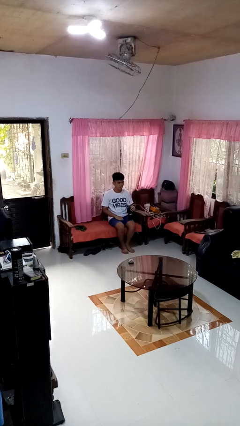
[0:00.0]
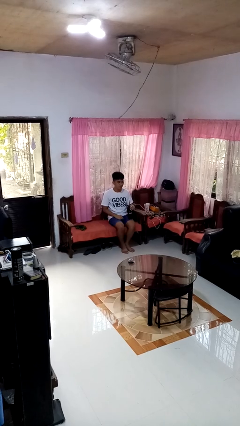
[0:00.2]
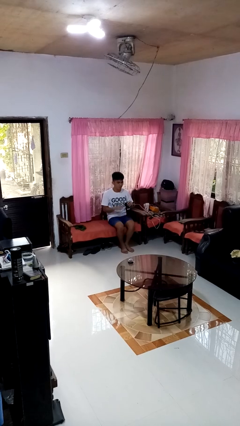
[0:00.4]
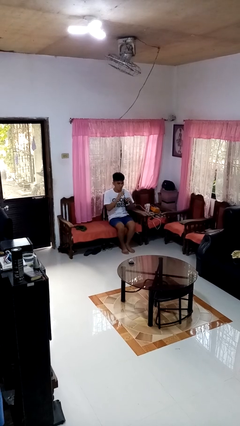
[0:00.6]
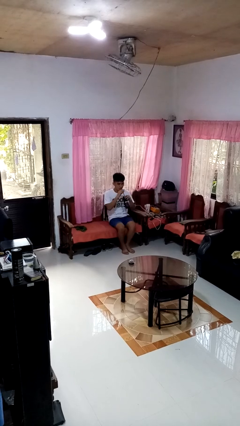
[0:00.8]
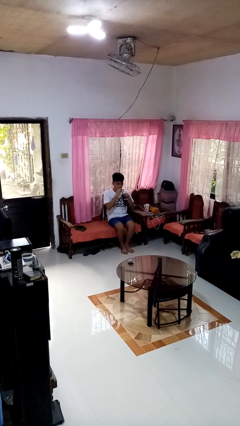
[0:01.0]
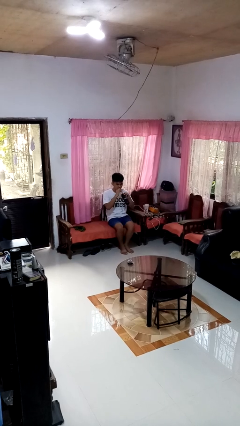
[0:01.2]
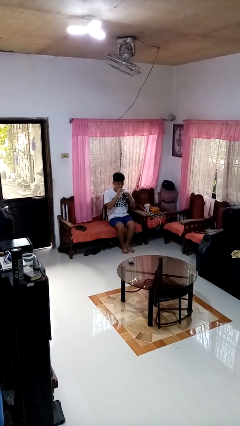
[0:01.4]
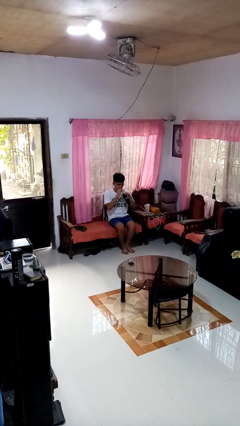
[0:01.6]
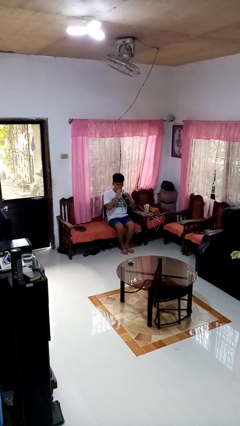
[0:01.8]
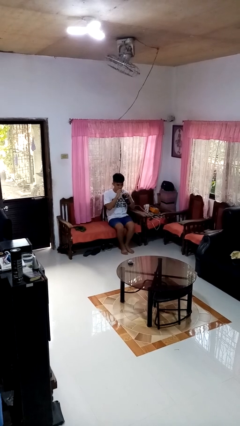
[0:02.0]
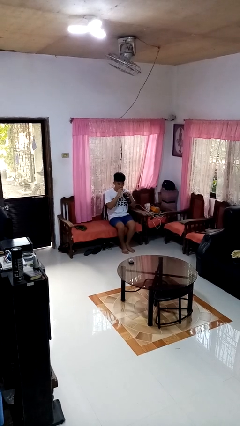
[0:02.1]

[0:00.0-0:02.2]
person drinks from straw

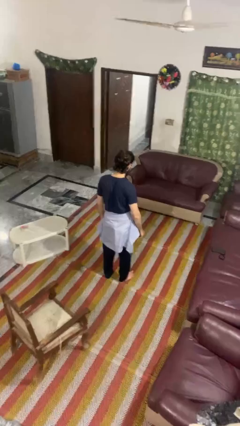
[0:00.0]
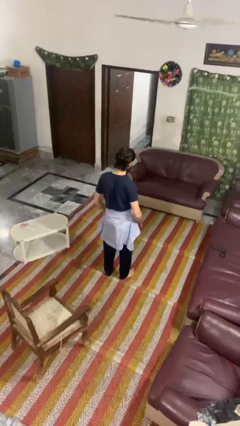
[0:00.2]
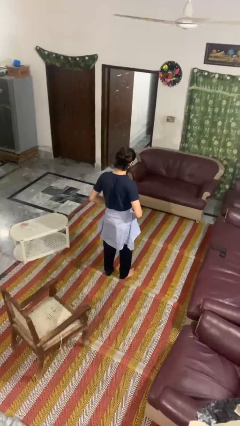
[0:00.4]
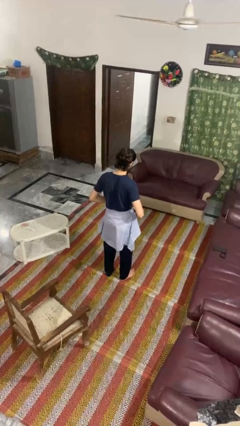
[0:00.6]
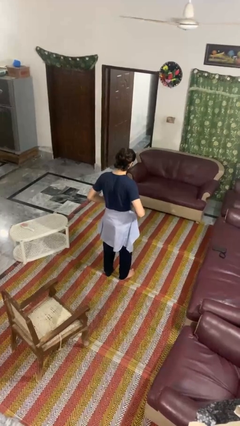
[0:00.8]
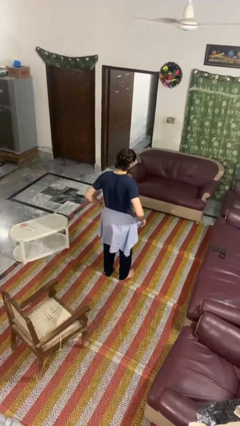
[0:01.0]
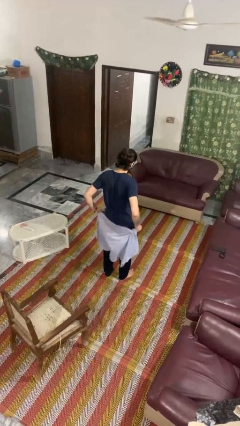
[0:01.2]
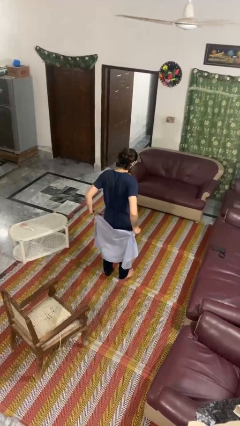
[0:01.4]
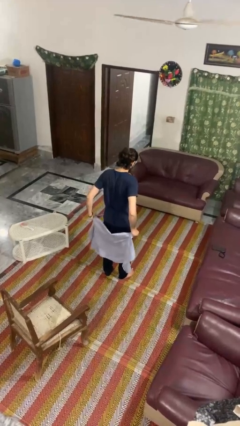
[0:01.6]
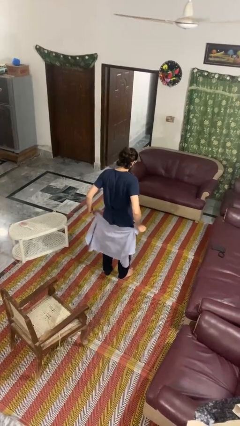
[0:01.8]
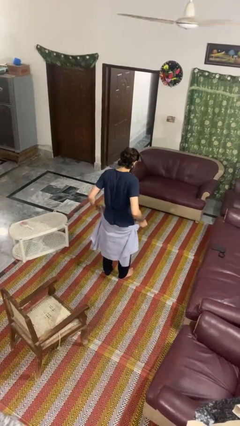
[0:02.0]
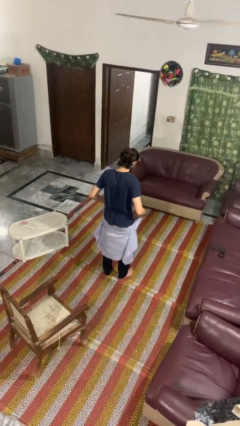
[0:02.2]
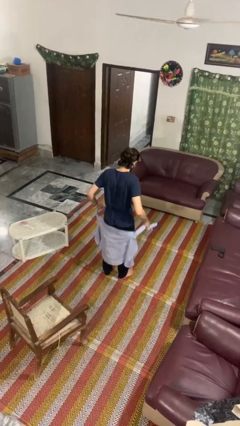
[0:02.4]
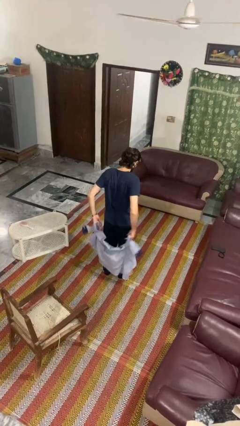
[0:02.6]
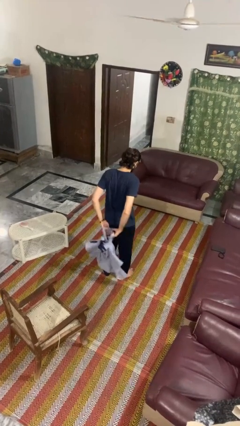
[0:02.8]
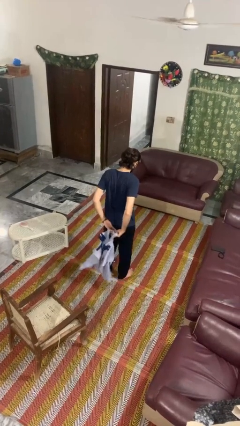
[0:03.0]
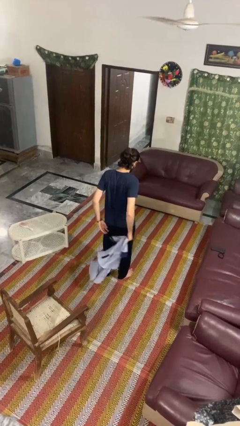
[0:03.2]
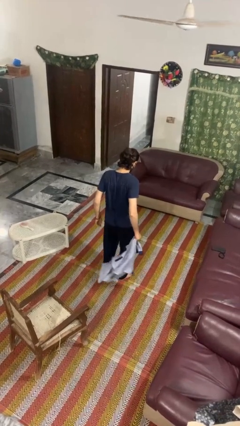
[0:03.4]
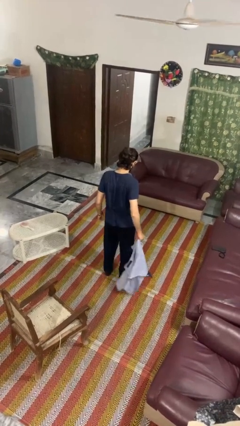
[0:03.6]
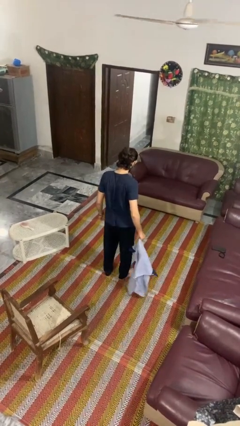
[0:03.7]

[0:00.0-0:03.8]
person unties jacket around waist

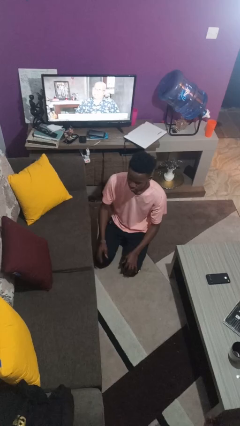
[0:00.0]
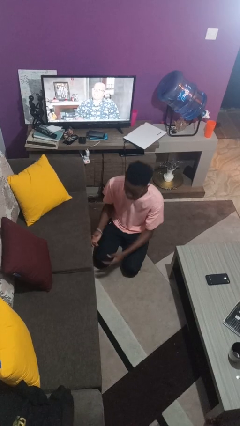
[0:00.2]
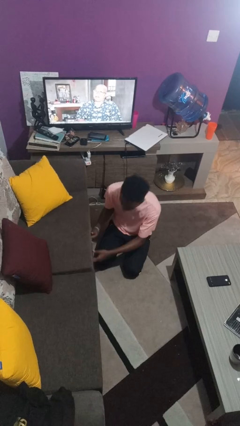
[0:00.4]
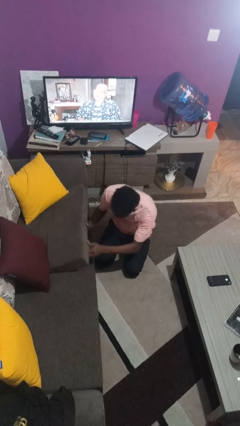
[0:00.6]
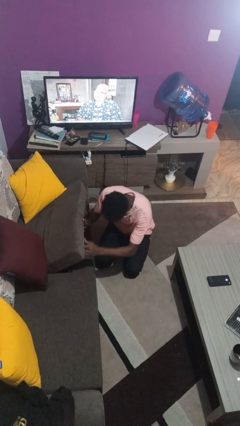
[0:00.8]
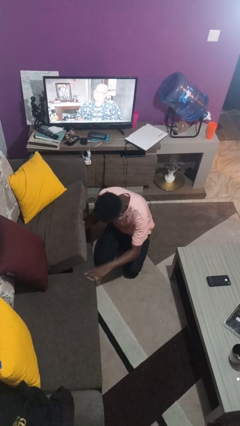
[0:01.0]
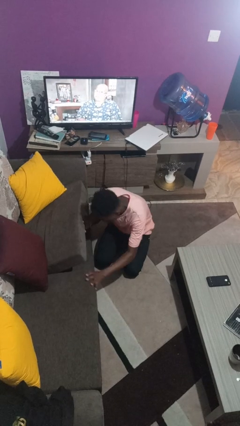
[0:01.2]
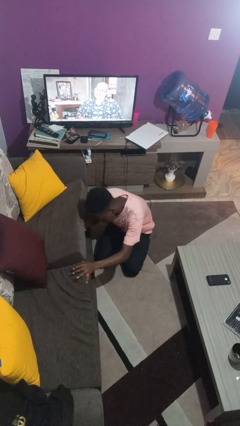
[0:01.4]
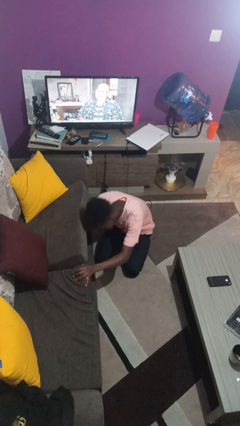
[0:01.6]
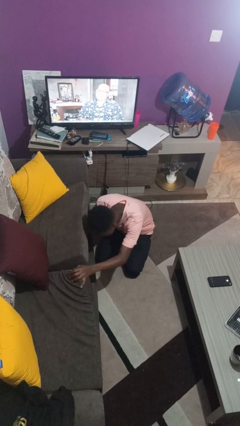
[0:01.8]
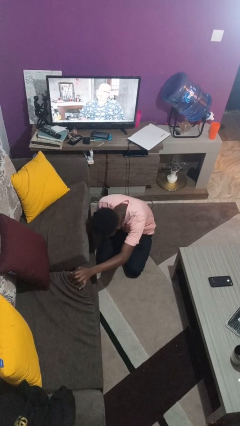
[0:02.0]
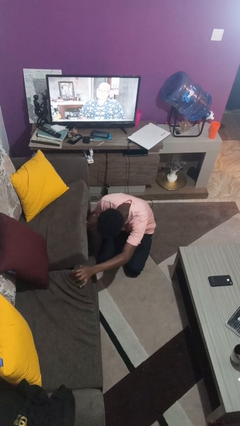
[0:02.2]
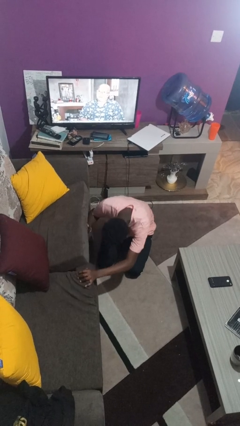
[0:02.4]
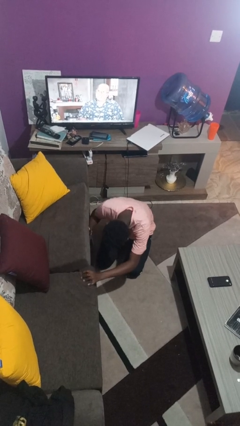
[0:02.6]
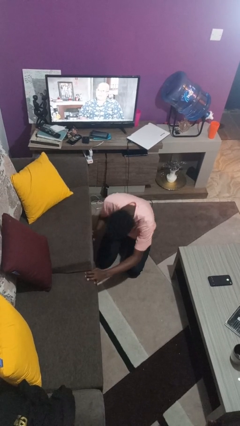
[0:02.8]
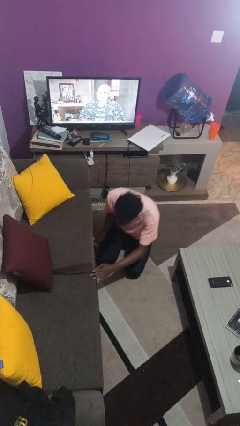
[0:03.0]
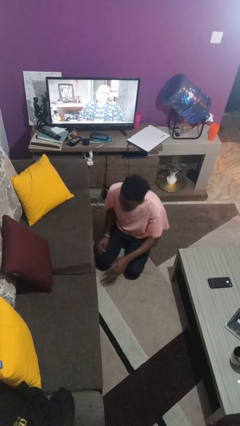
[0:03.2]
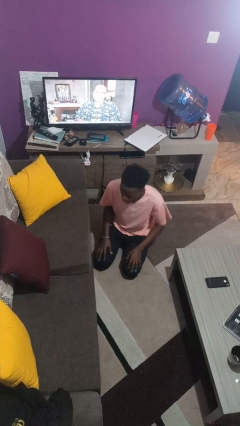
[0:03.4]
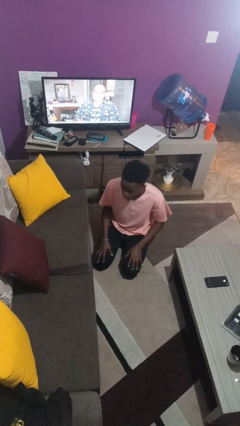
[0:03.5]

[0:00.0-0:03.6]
person searches under couch

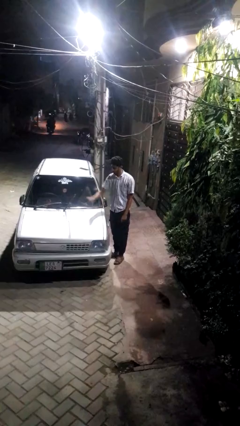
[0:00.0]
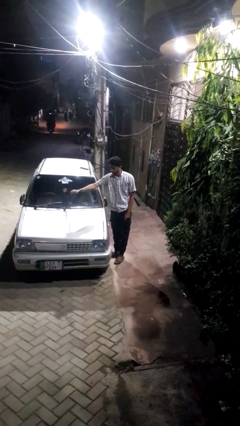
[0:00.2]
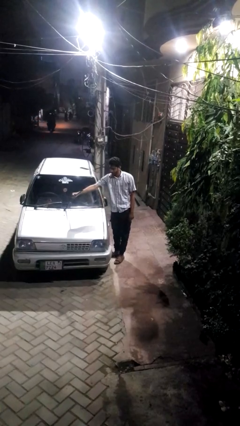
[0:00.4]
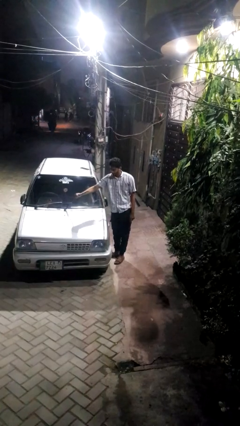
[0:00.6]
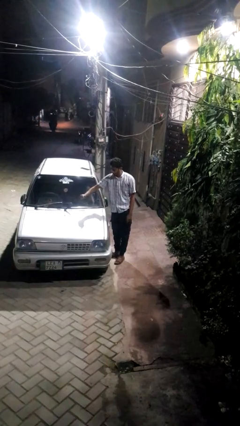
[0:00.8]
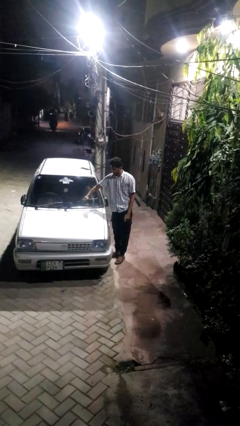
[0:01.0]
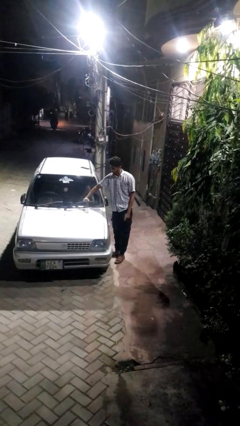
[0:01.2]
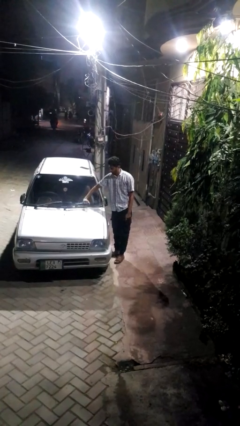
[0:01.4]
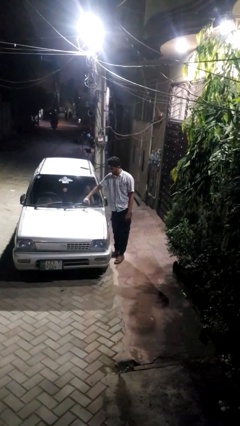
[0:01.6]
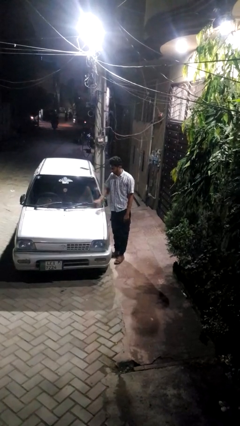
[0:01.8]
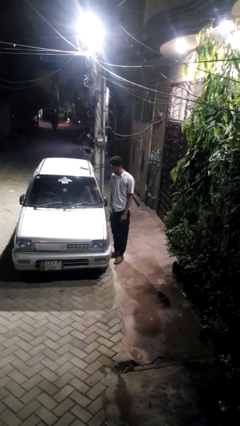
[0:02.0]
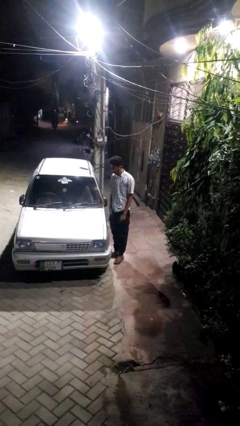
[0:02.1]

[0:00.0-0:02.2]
person flips down car wipers

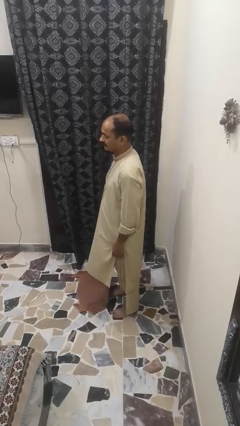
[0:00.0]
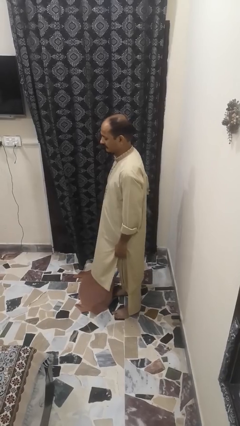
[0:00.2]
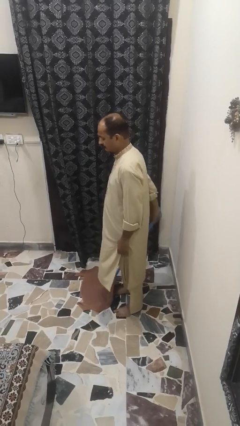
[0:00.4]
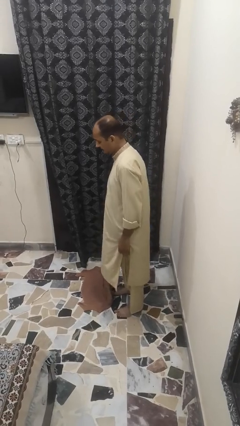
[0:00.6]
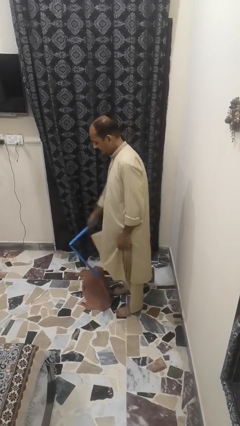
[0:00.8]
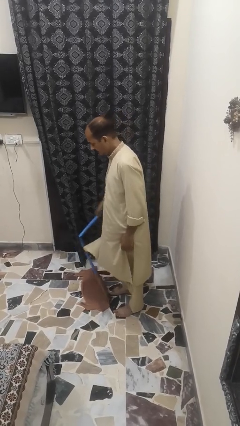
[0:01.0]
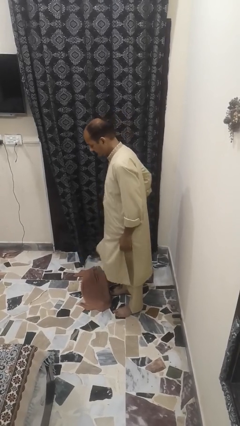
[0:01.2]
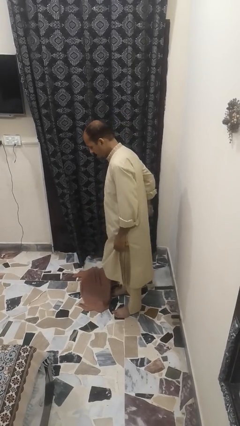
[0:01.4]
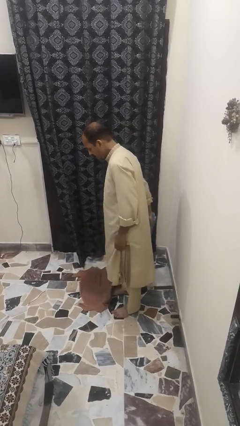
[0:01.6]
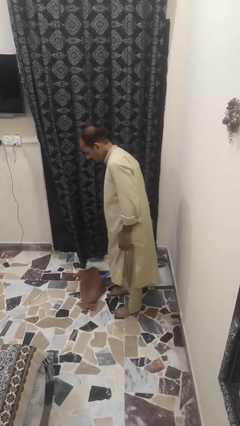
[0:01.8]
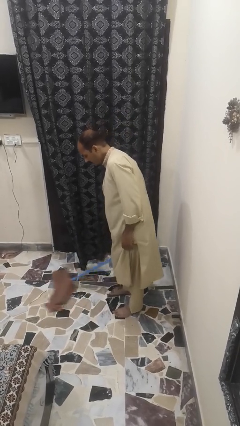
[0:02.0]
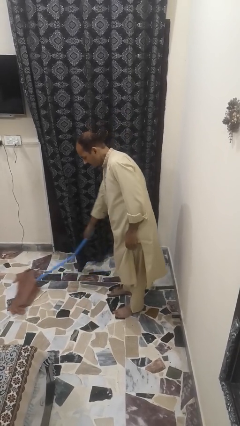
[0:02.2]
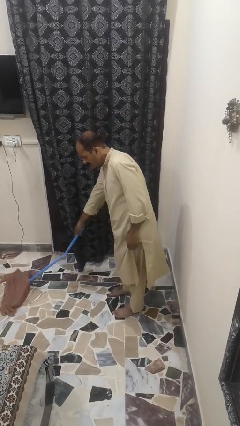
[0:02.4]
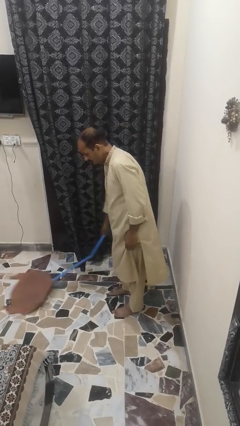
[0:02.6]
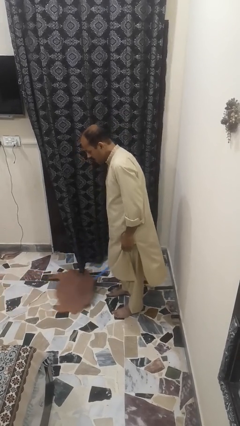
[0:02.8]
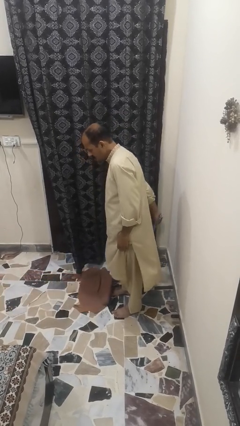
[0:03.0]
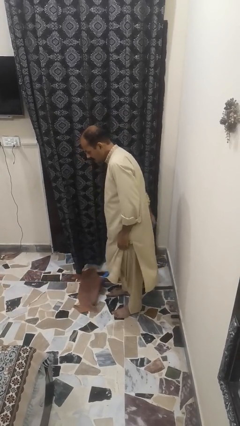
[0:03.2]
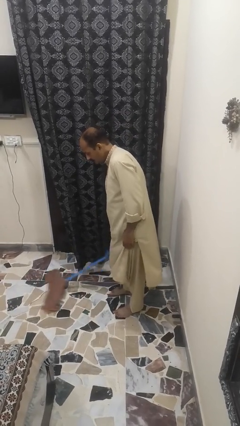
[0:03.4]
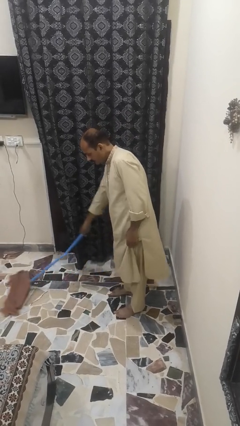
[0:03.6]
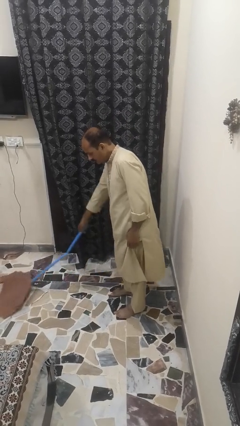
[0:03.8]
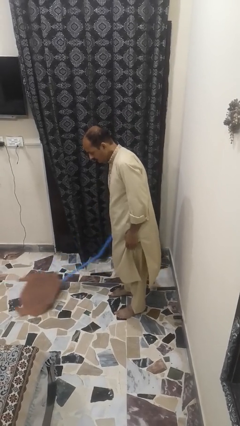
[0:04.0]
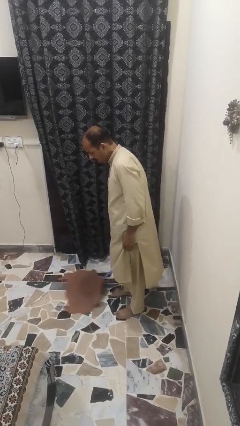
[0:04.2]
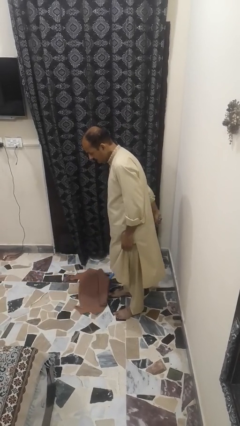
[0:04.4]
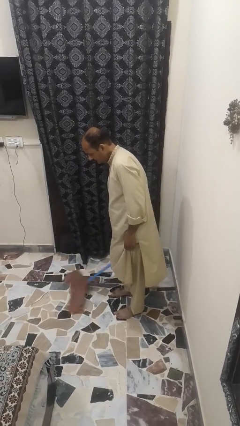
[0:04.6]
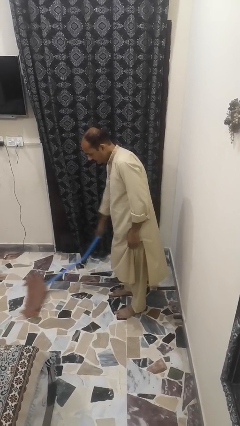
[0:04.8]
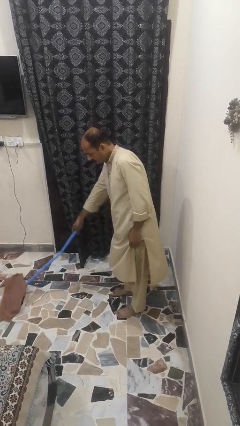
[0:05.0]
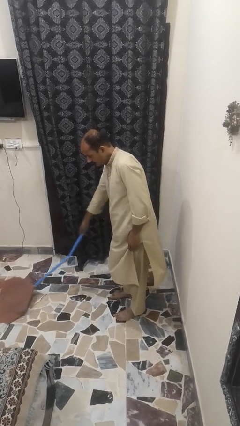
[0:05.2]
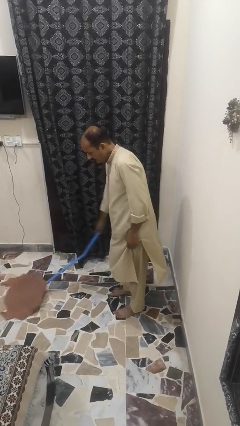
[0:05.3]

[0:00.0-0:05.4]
person mops

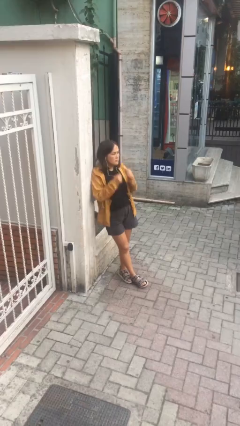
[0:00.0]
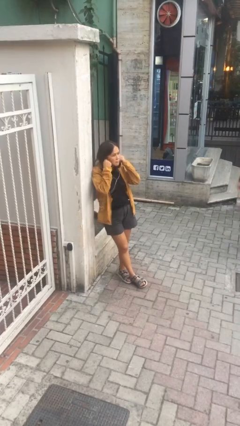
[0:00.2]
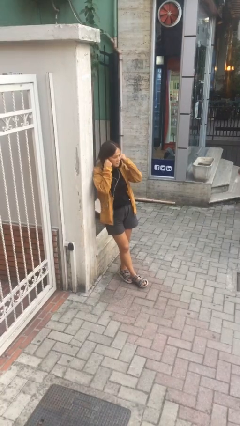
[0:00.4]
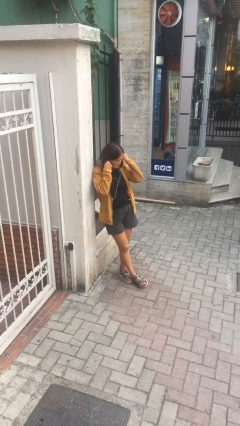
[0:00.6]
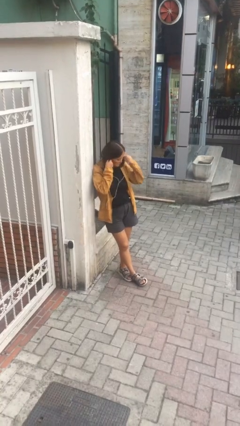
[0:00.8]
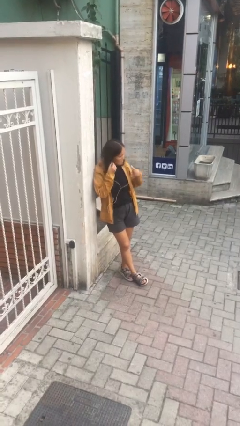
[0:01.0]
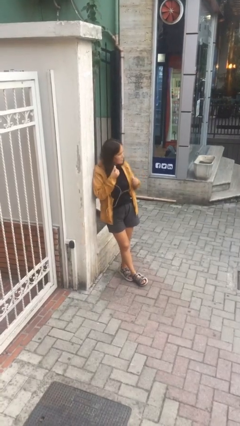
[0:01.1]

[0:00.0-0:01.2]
person takes off headphones
